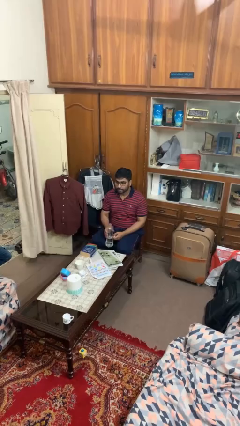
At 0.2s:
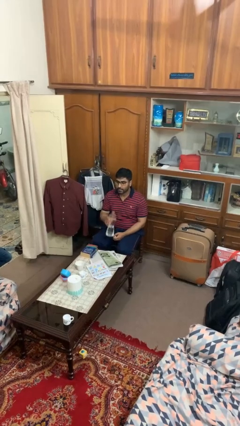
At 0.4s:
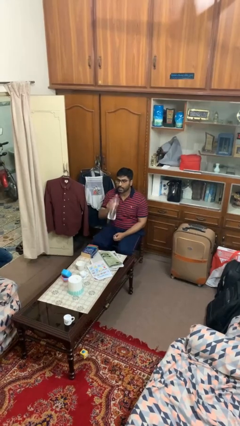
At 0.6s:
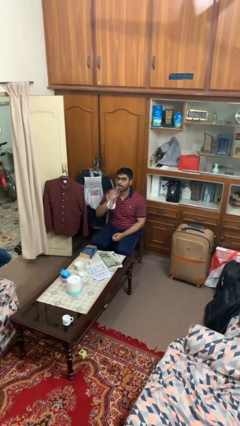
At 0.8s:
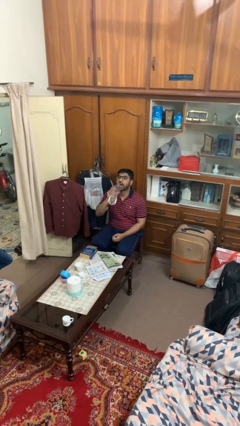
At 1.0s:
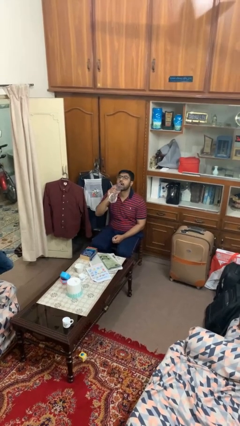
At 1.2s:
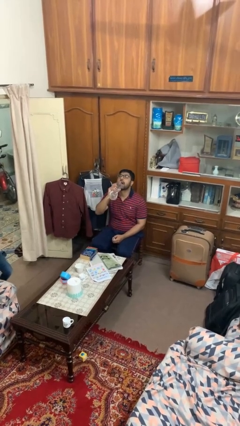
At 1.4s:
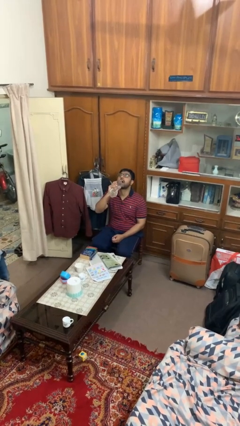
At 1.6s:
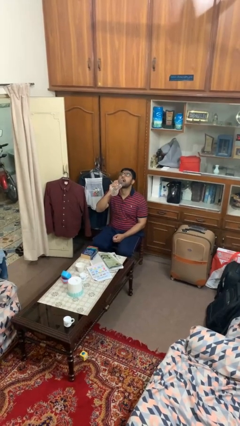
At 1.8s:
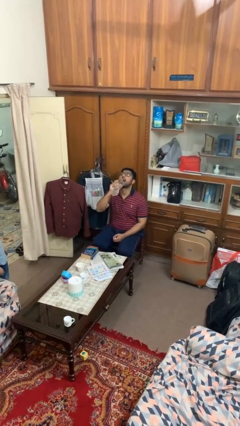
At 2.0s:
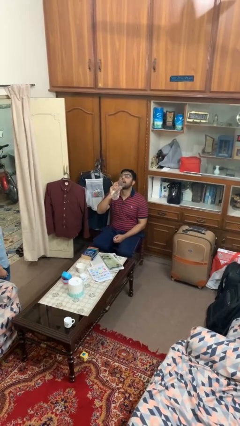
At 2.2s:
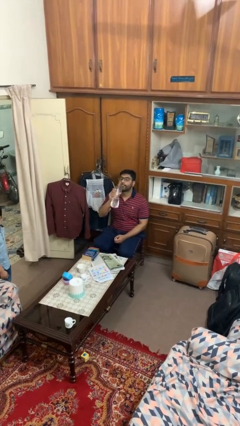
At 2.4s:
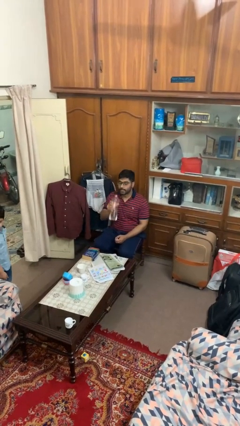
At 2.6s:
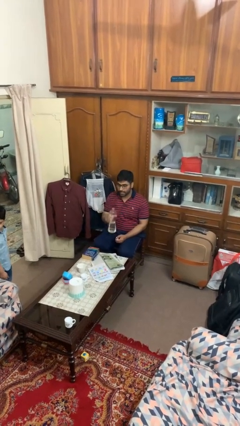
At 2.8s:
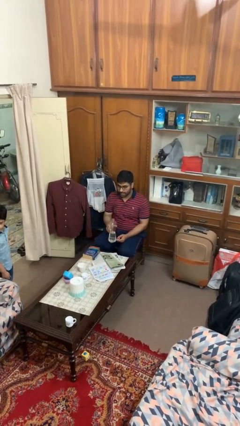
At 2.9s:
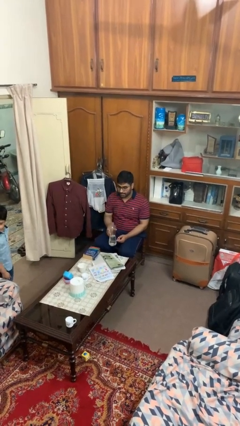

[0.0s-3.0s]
person drinks from bottle

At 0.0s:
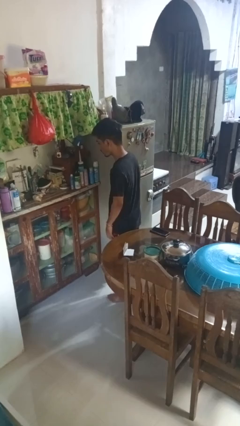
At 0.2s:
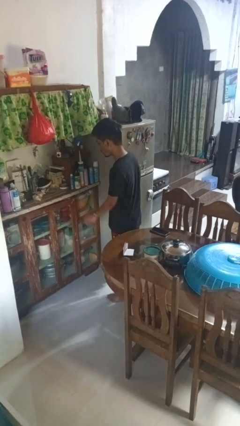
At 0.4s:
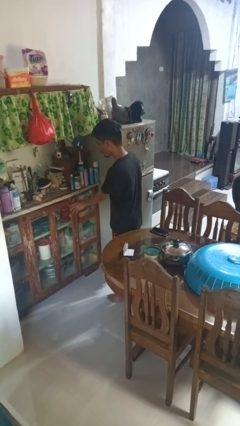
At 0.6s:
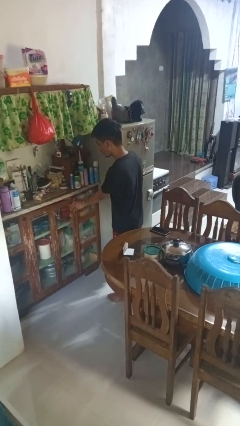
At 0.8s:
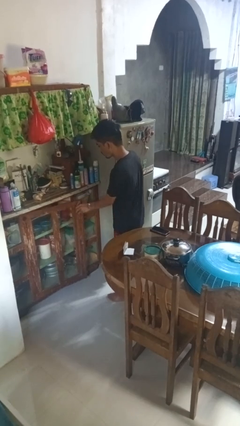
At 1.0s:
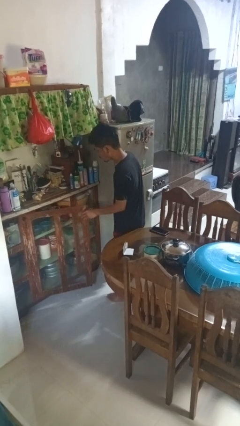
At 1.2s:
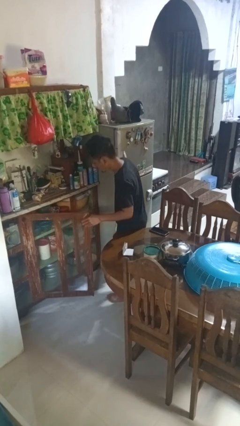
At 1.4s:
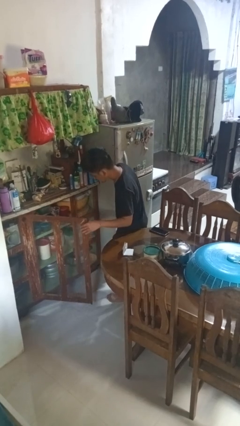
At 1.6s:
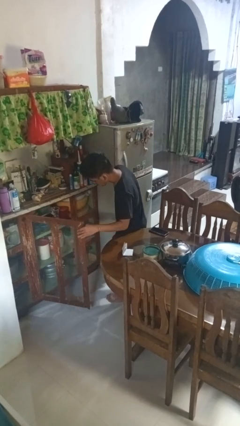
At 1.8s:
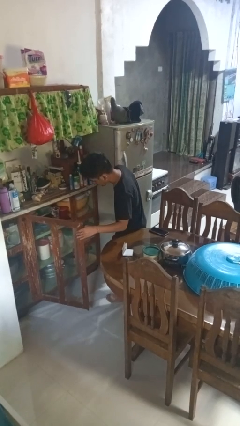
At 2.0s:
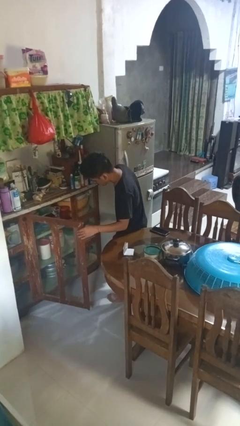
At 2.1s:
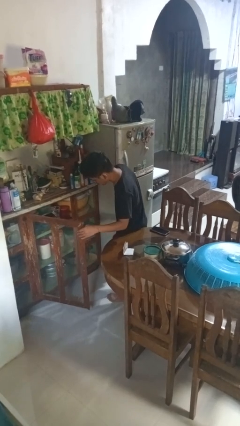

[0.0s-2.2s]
person opens cabinet

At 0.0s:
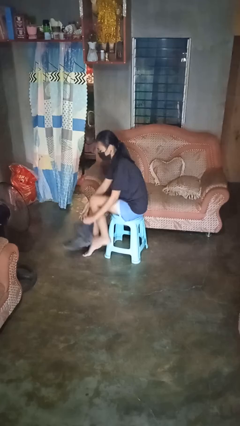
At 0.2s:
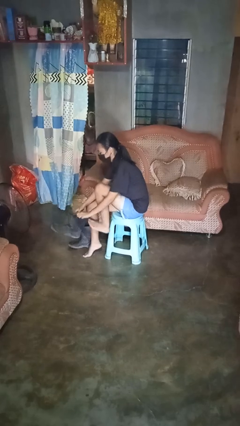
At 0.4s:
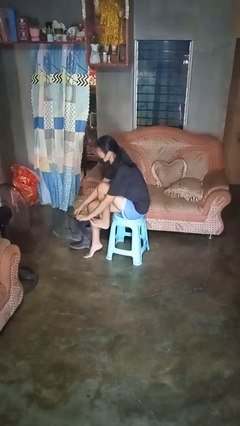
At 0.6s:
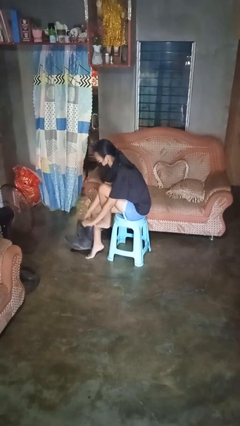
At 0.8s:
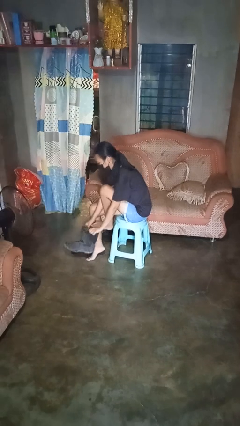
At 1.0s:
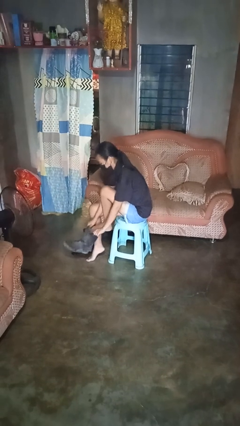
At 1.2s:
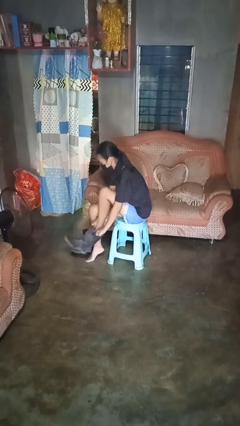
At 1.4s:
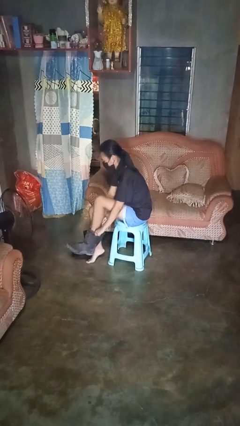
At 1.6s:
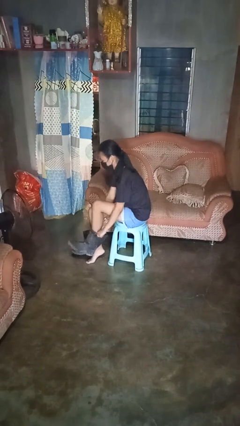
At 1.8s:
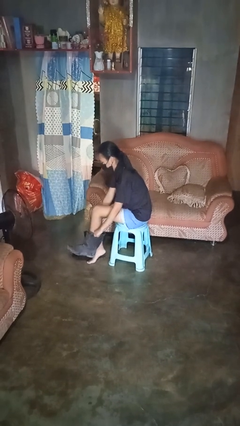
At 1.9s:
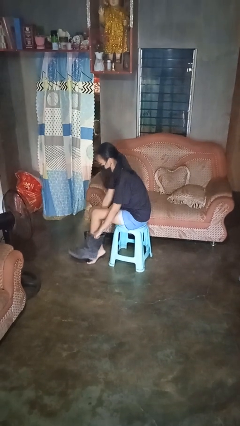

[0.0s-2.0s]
person puts on boots

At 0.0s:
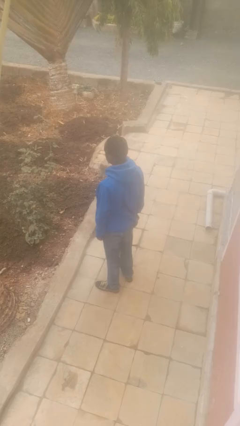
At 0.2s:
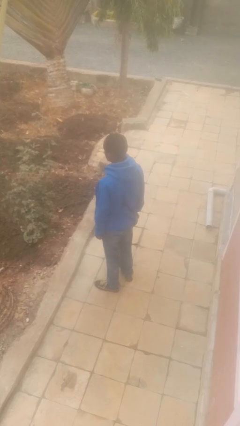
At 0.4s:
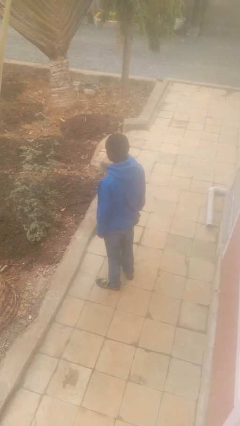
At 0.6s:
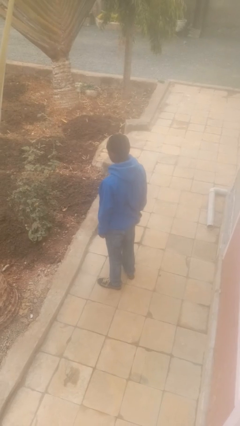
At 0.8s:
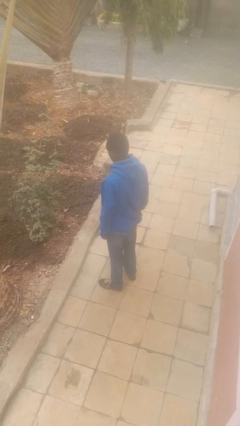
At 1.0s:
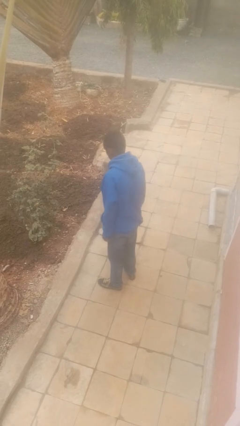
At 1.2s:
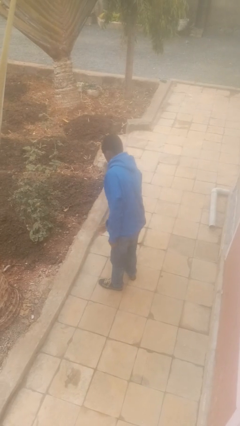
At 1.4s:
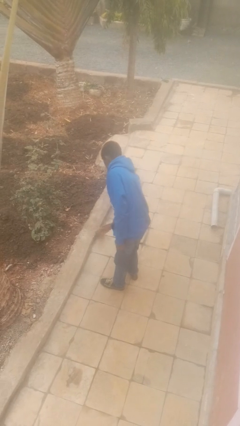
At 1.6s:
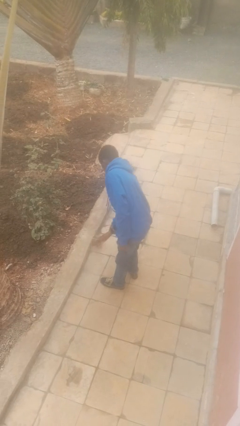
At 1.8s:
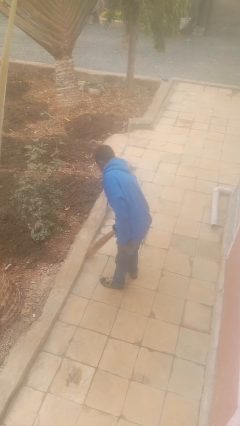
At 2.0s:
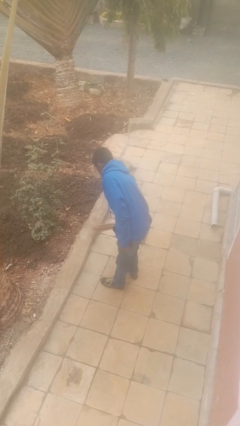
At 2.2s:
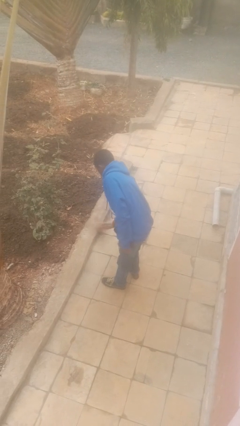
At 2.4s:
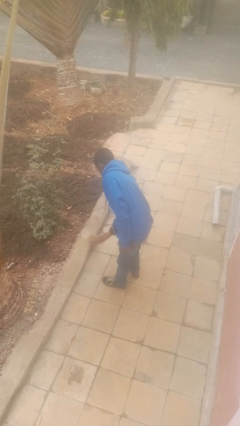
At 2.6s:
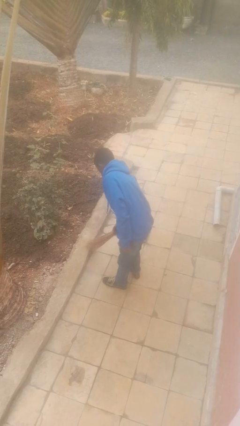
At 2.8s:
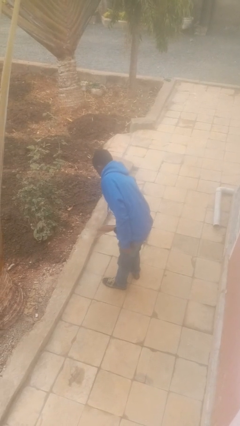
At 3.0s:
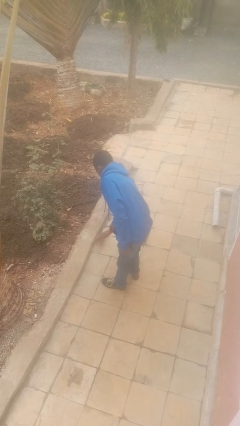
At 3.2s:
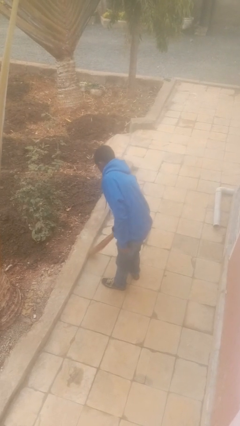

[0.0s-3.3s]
person sweeps floor

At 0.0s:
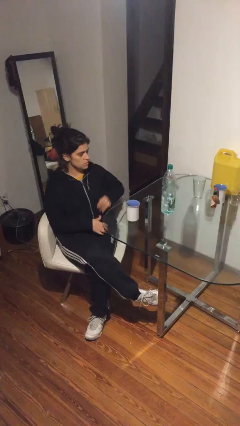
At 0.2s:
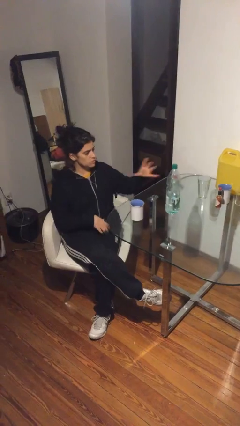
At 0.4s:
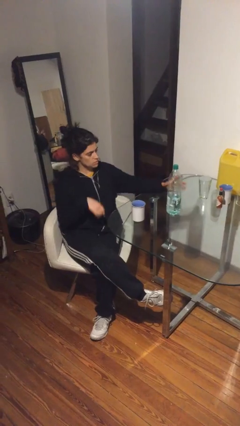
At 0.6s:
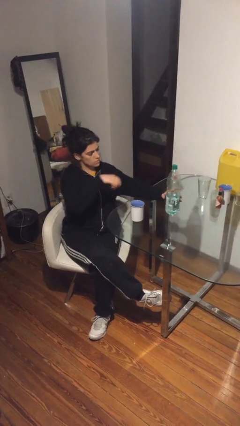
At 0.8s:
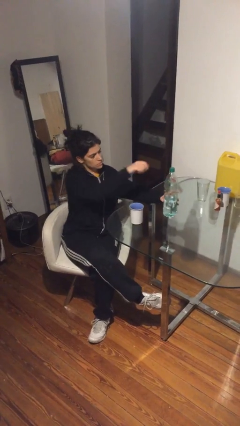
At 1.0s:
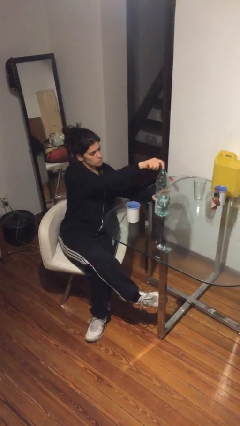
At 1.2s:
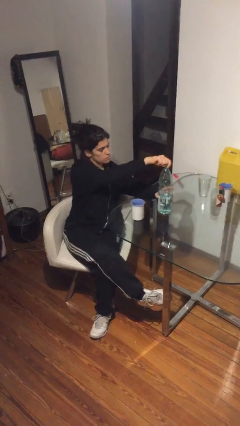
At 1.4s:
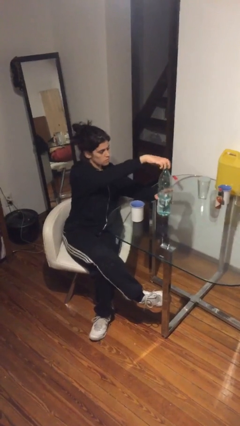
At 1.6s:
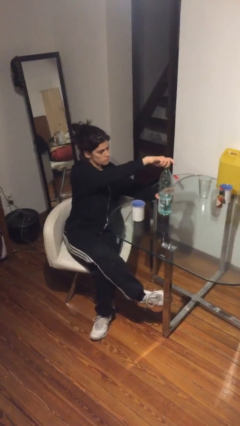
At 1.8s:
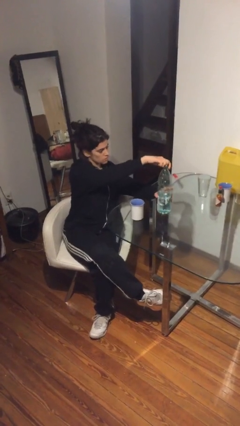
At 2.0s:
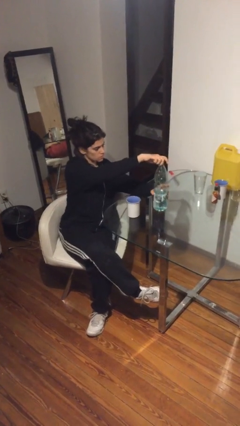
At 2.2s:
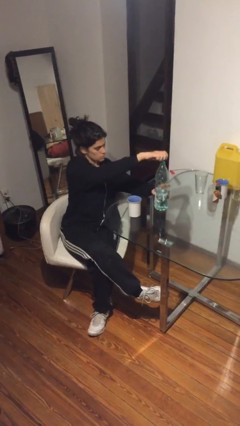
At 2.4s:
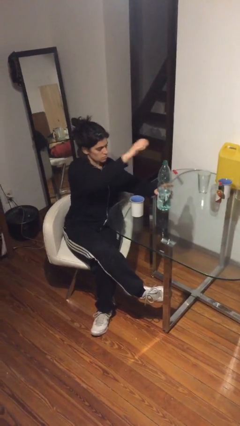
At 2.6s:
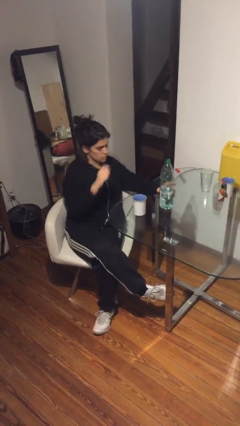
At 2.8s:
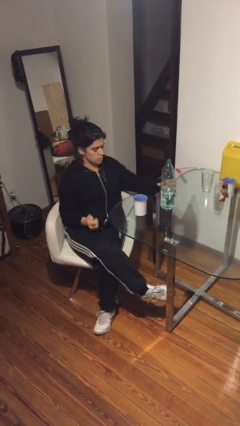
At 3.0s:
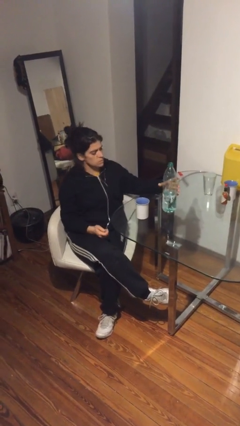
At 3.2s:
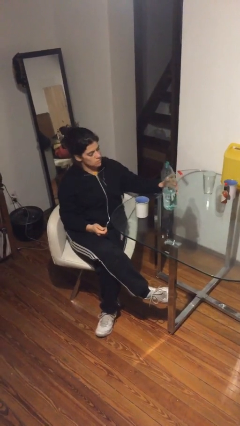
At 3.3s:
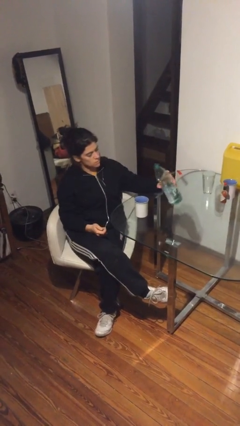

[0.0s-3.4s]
person unscrews lid from bottle

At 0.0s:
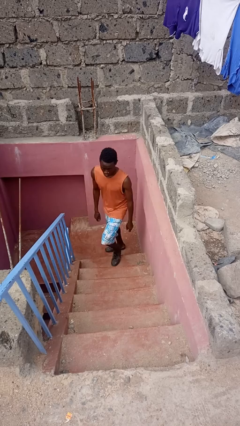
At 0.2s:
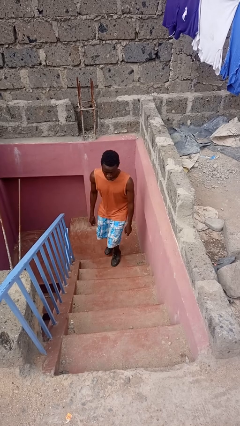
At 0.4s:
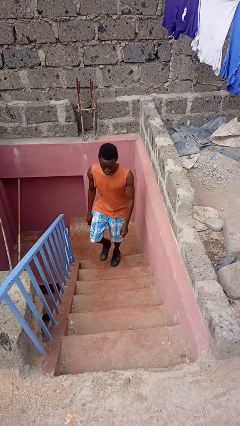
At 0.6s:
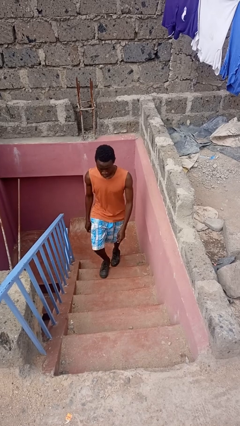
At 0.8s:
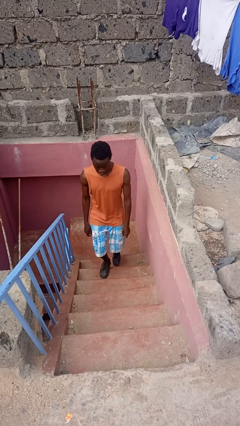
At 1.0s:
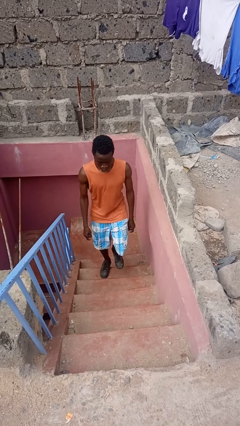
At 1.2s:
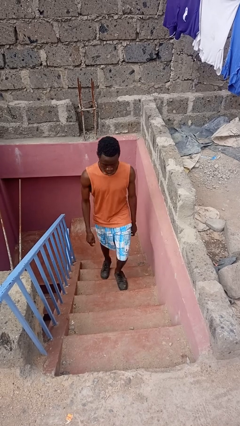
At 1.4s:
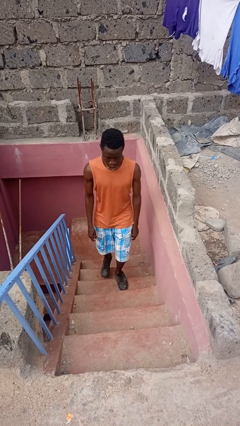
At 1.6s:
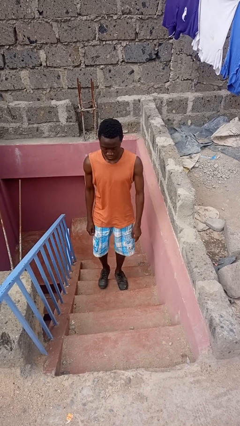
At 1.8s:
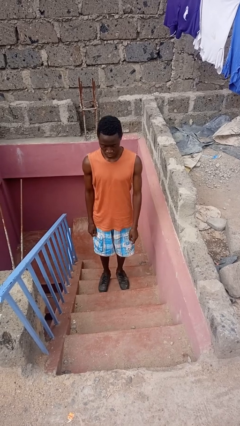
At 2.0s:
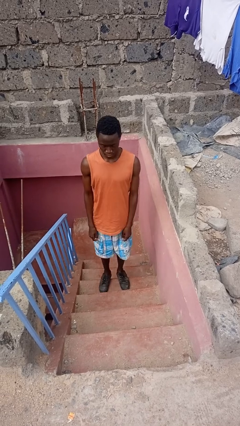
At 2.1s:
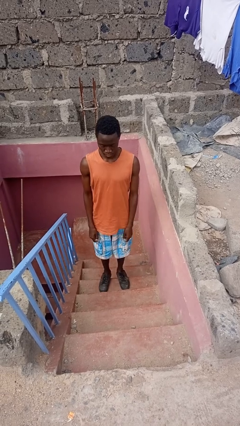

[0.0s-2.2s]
person climbs up stairs

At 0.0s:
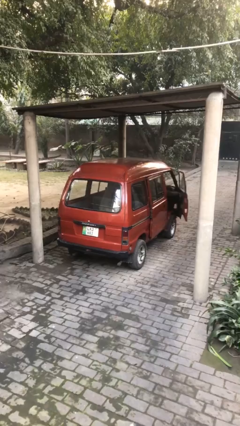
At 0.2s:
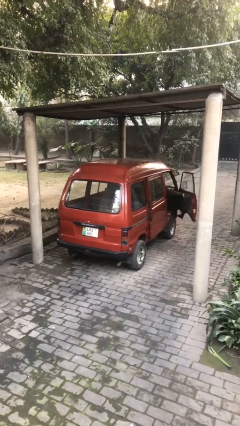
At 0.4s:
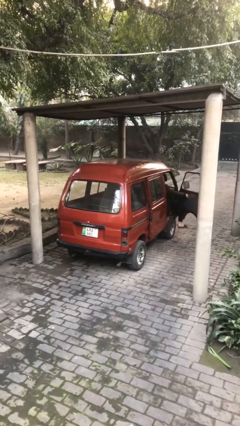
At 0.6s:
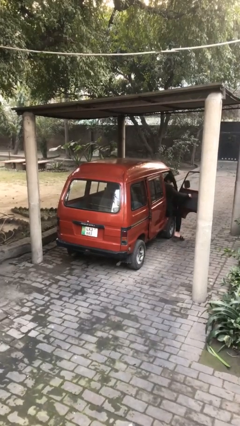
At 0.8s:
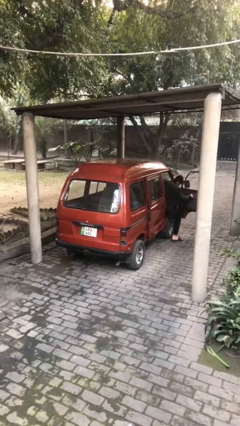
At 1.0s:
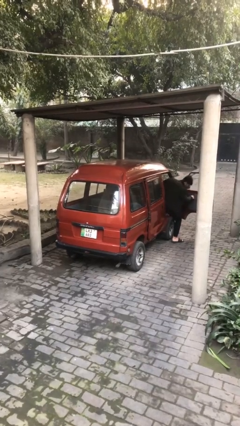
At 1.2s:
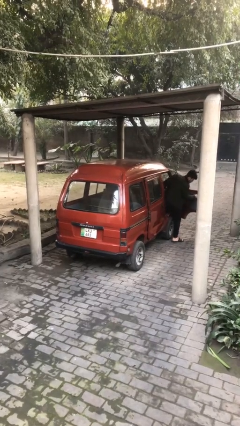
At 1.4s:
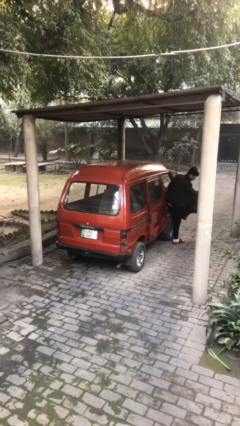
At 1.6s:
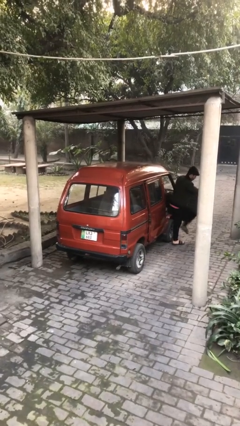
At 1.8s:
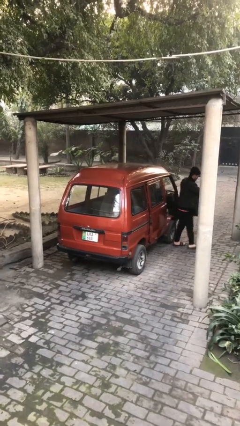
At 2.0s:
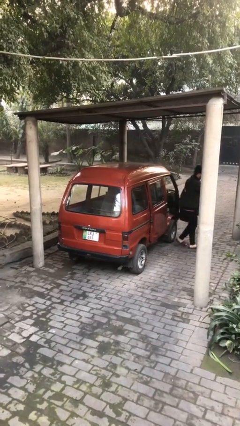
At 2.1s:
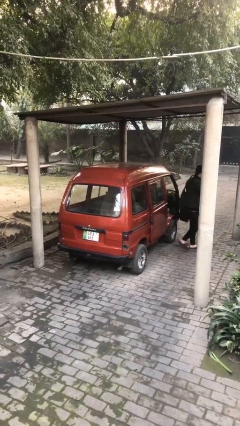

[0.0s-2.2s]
car drops off person
